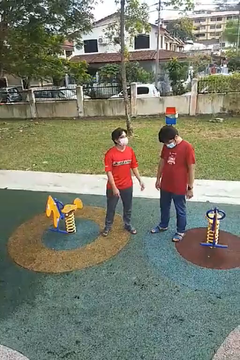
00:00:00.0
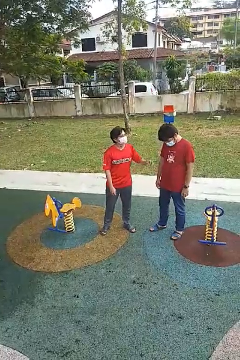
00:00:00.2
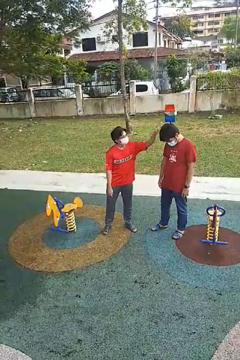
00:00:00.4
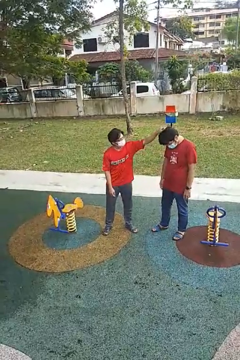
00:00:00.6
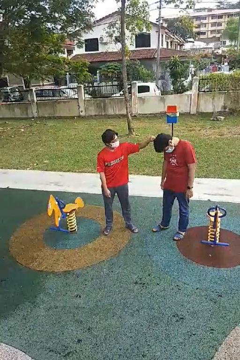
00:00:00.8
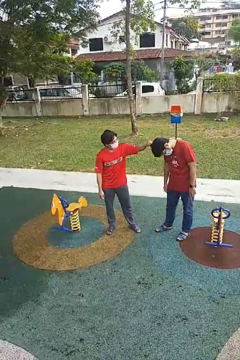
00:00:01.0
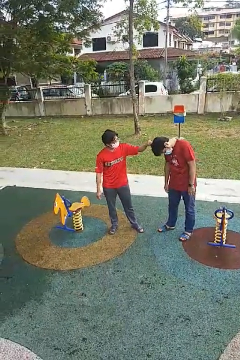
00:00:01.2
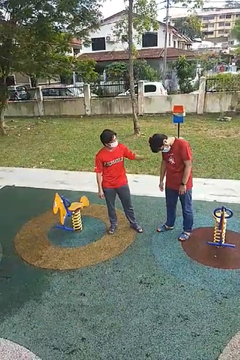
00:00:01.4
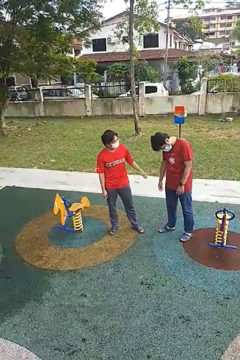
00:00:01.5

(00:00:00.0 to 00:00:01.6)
person grabs person by hair

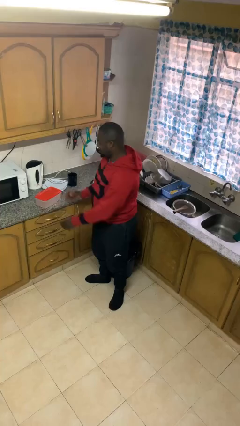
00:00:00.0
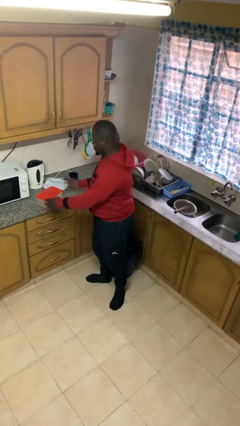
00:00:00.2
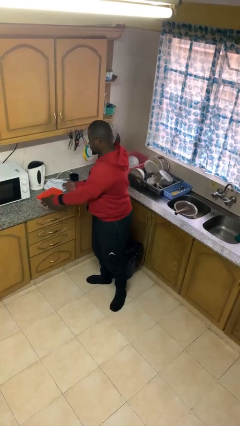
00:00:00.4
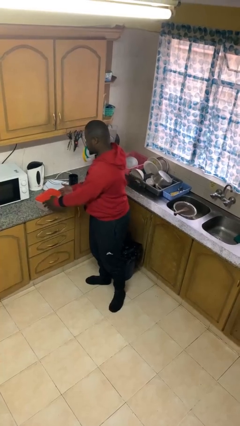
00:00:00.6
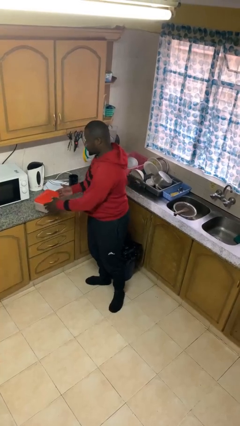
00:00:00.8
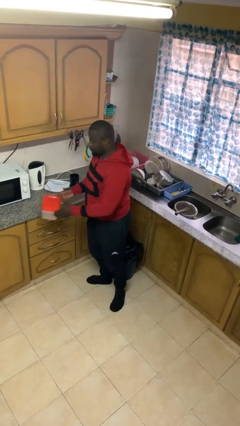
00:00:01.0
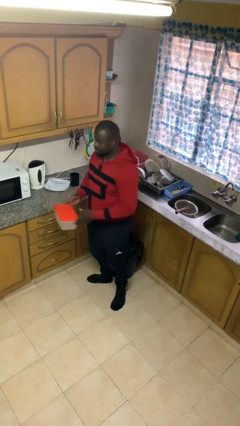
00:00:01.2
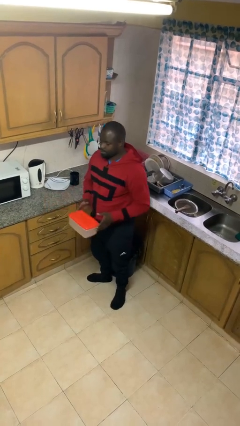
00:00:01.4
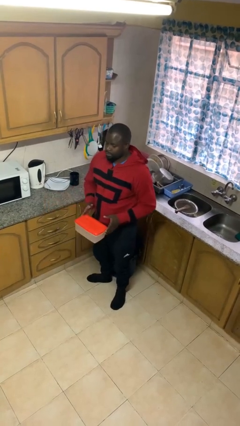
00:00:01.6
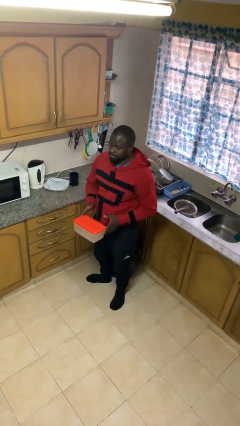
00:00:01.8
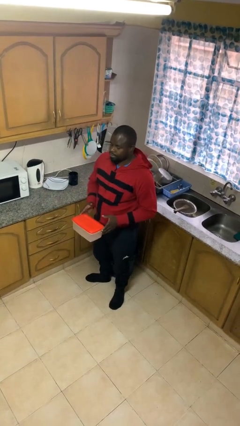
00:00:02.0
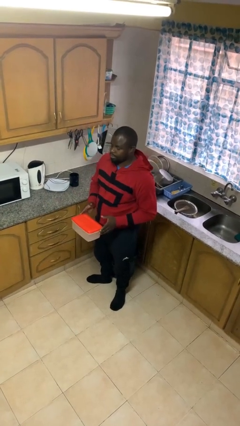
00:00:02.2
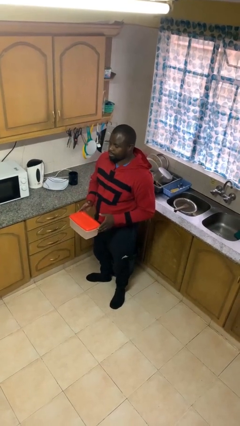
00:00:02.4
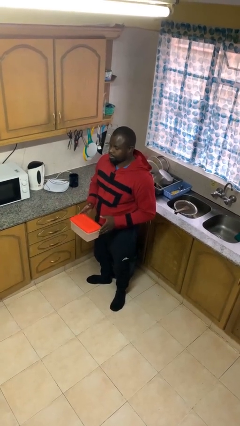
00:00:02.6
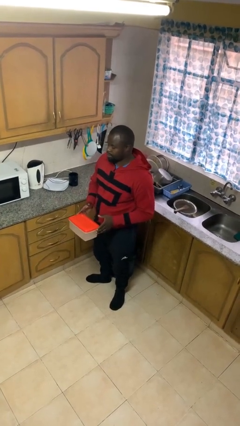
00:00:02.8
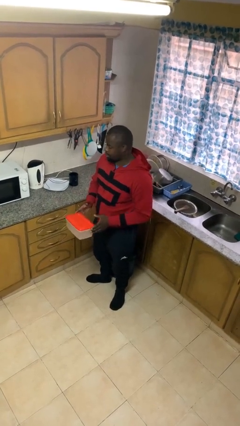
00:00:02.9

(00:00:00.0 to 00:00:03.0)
person picks up object from countertop

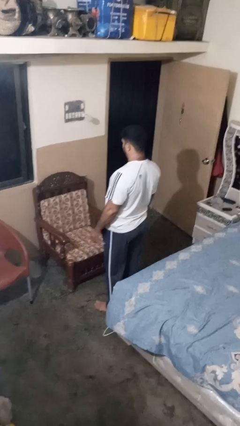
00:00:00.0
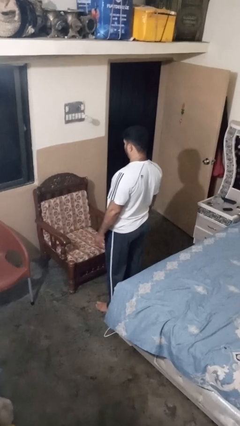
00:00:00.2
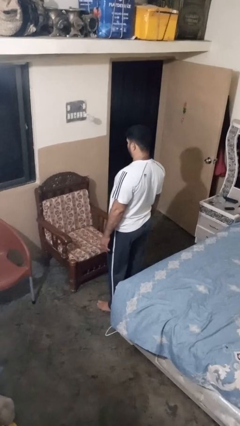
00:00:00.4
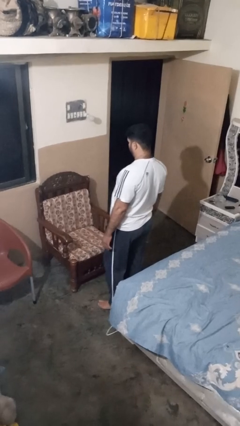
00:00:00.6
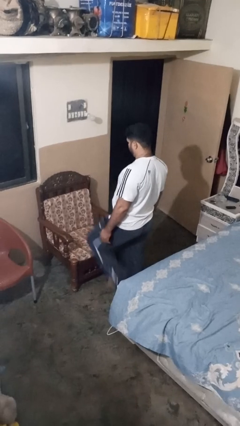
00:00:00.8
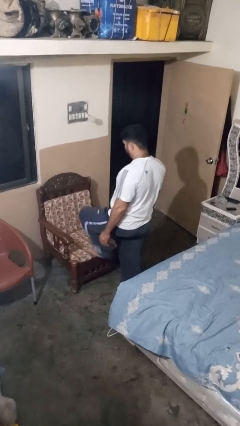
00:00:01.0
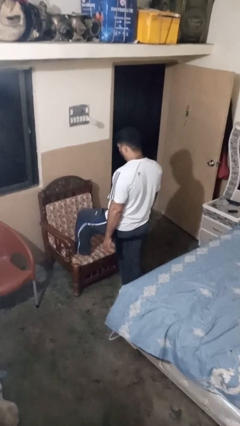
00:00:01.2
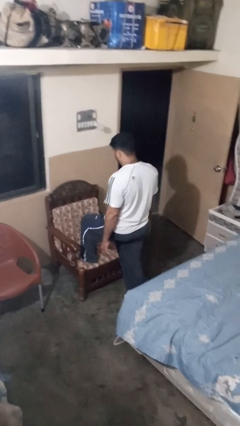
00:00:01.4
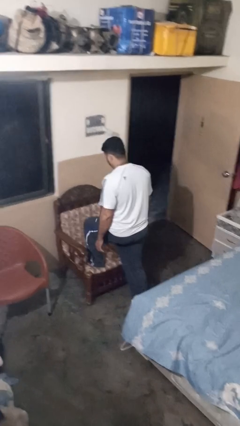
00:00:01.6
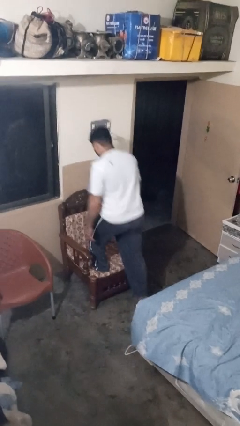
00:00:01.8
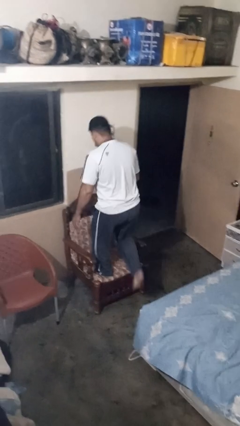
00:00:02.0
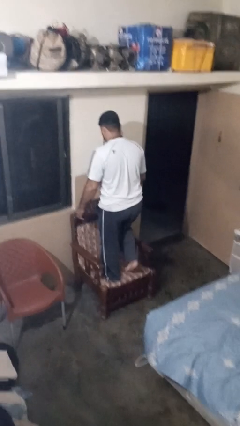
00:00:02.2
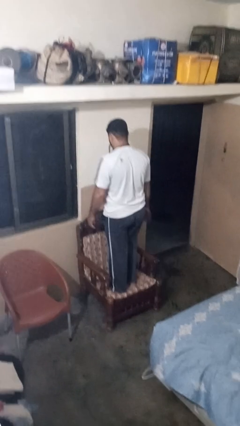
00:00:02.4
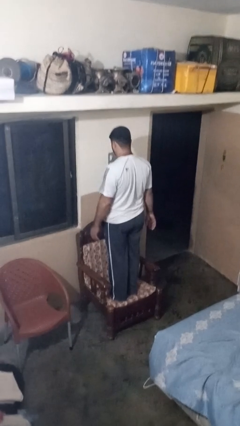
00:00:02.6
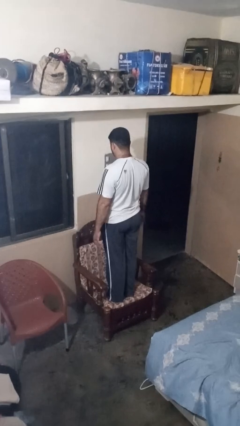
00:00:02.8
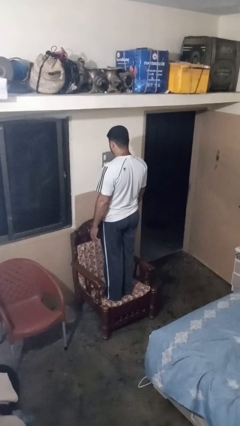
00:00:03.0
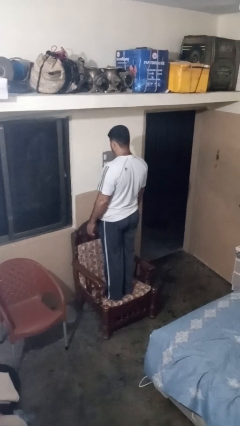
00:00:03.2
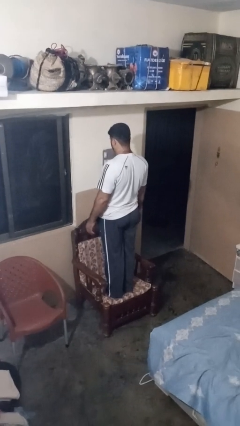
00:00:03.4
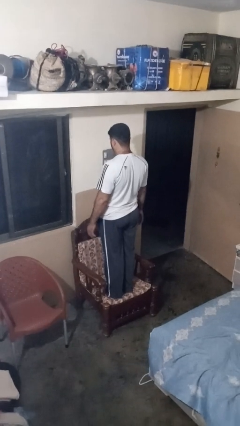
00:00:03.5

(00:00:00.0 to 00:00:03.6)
person climbs on couch

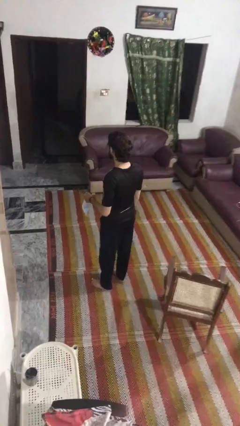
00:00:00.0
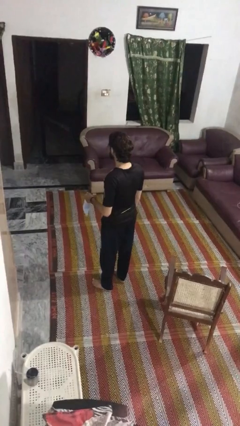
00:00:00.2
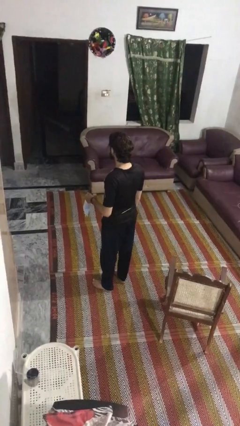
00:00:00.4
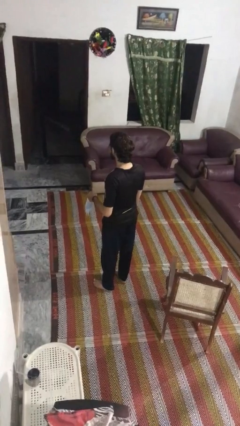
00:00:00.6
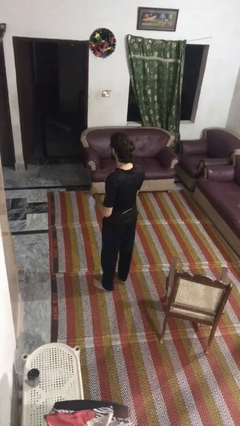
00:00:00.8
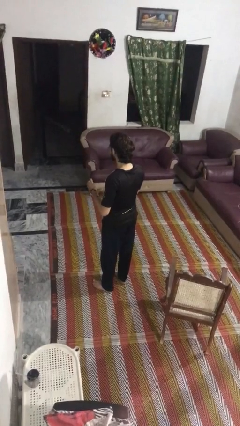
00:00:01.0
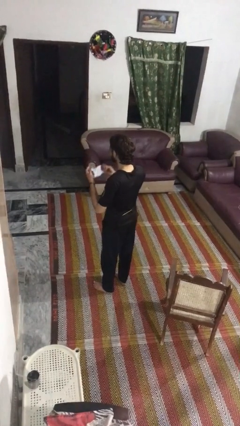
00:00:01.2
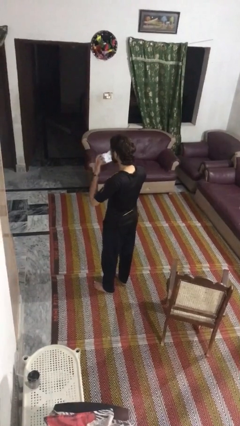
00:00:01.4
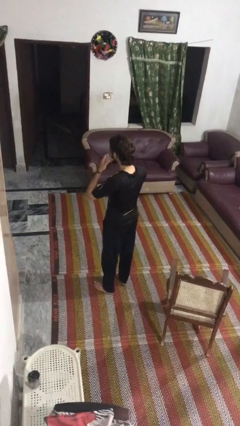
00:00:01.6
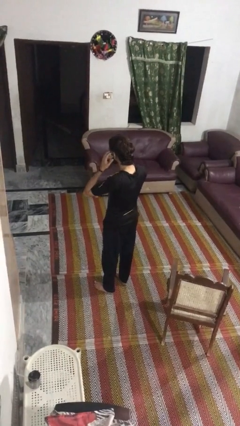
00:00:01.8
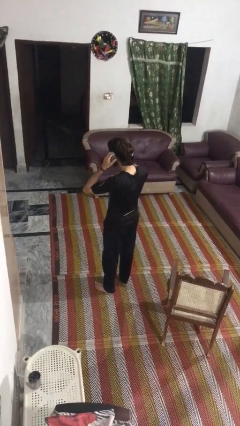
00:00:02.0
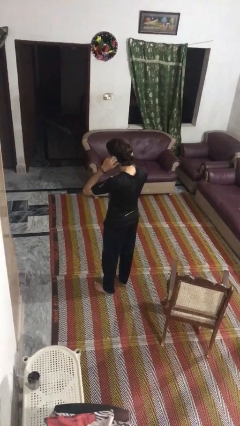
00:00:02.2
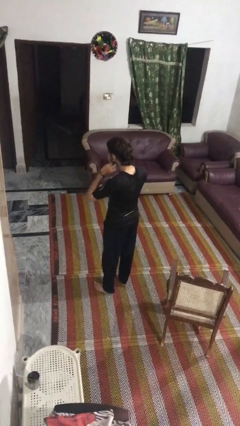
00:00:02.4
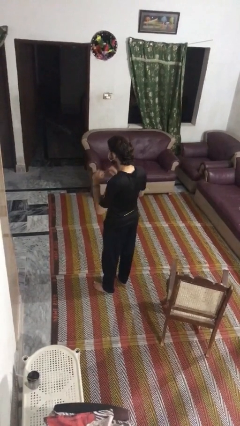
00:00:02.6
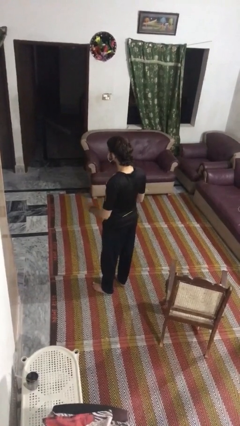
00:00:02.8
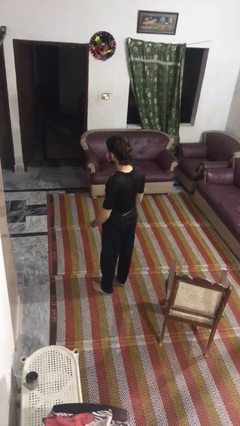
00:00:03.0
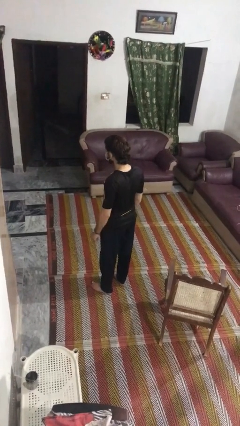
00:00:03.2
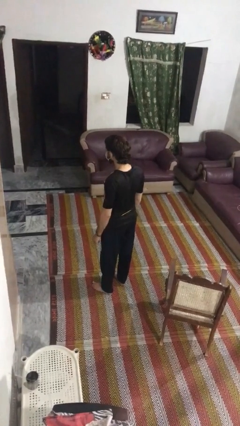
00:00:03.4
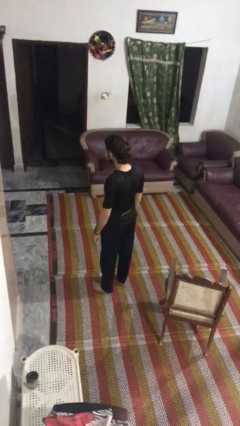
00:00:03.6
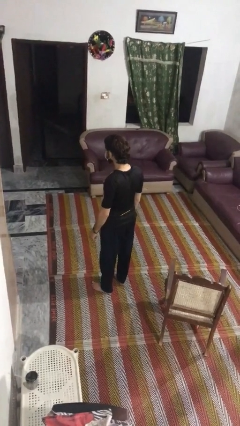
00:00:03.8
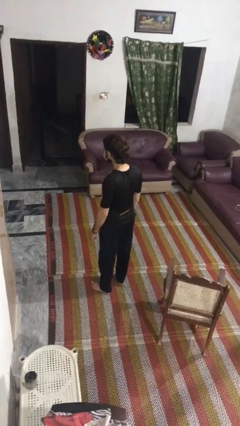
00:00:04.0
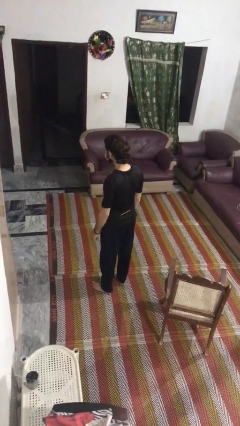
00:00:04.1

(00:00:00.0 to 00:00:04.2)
person puts on facemask

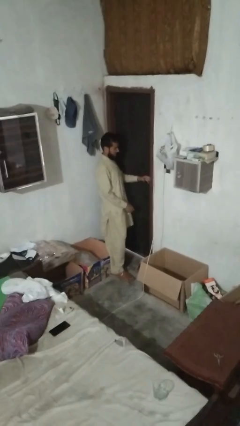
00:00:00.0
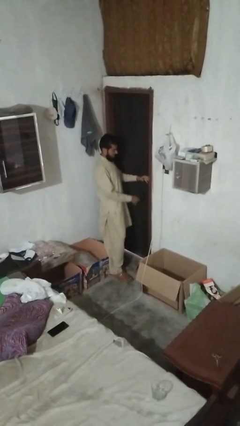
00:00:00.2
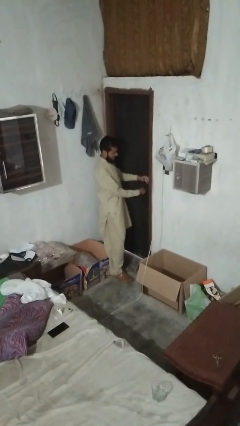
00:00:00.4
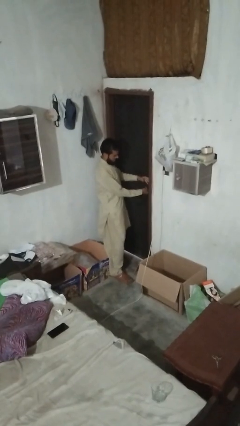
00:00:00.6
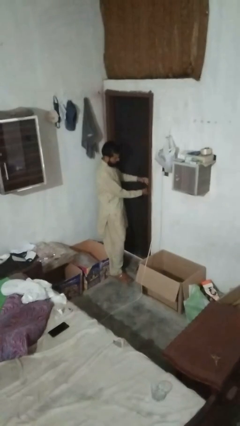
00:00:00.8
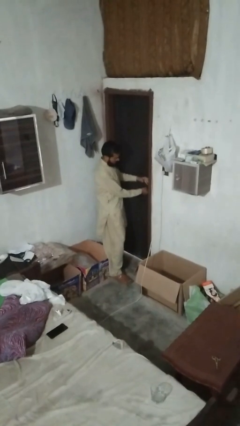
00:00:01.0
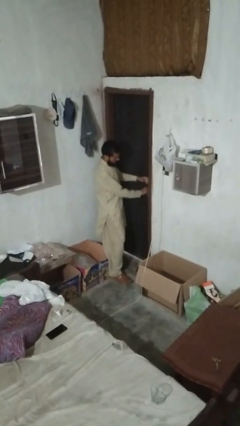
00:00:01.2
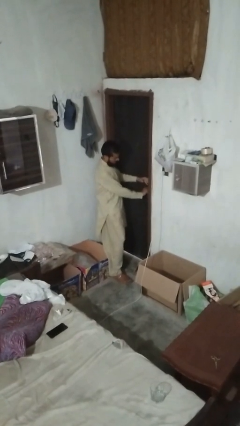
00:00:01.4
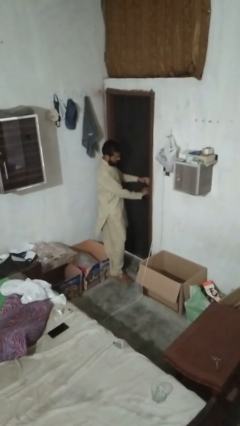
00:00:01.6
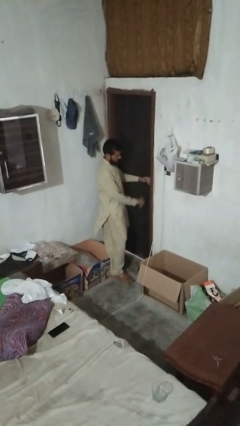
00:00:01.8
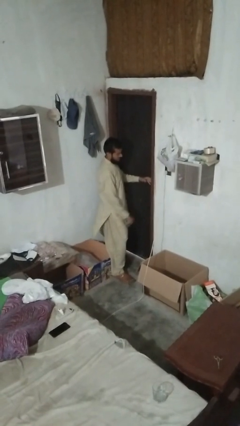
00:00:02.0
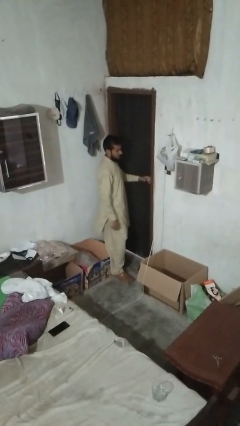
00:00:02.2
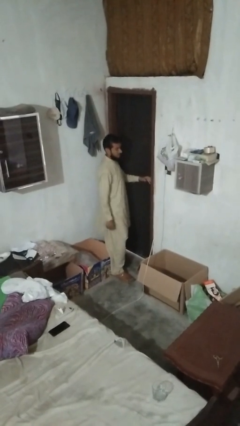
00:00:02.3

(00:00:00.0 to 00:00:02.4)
person locks door with keys

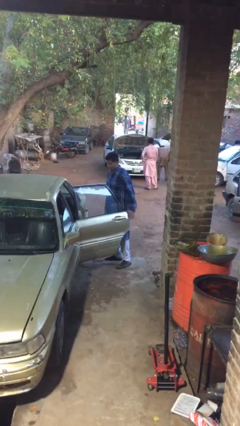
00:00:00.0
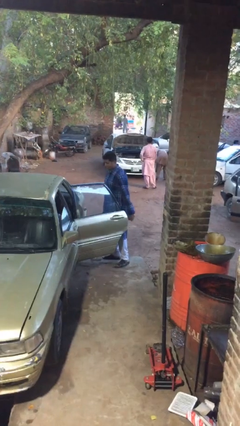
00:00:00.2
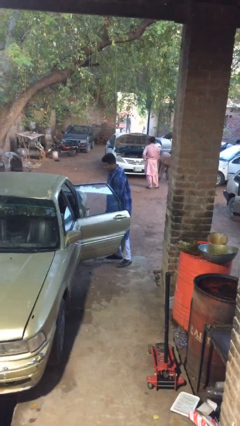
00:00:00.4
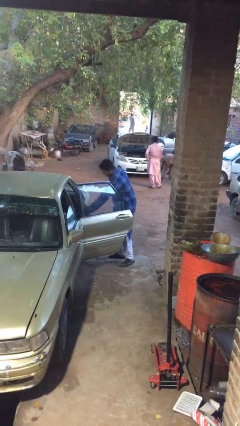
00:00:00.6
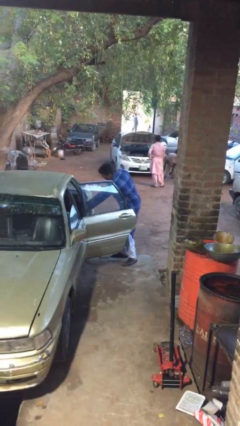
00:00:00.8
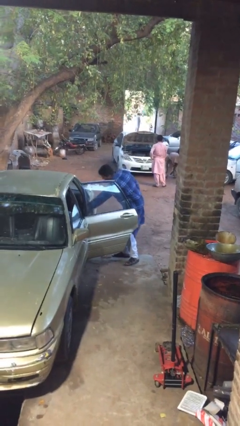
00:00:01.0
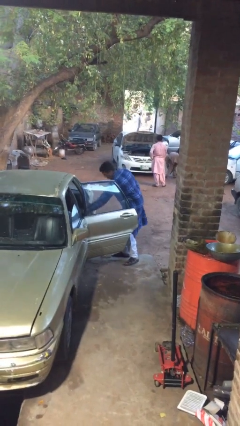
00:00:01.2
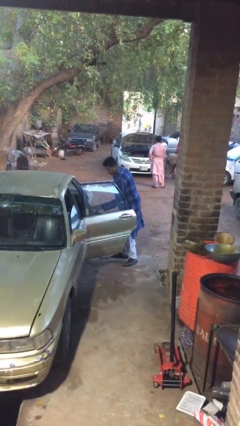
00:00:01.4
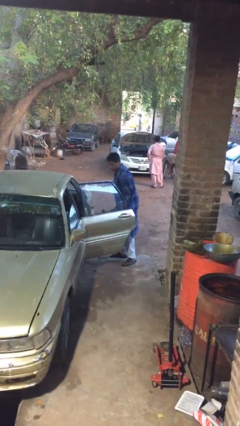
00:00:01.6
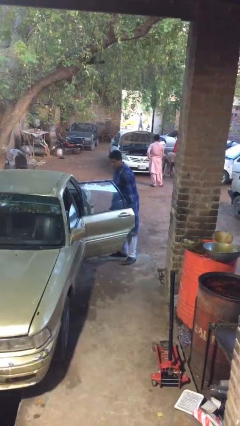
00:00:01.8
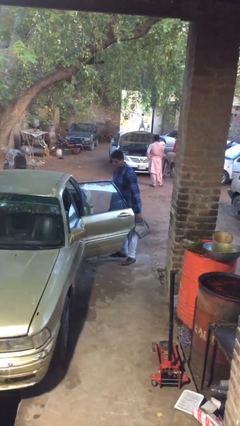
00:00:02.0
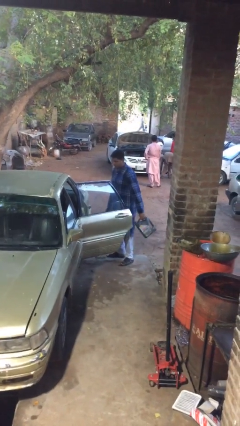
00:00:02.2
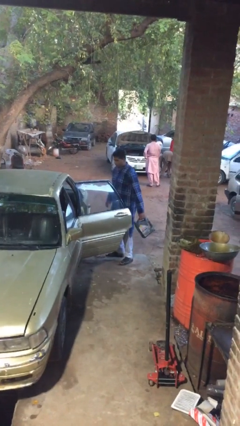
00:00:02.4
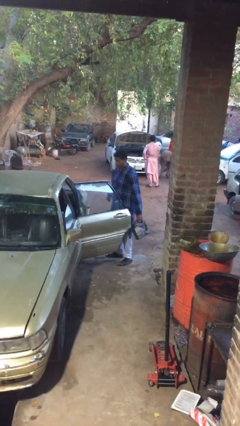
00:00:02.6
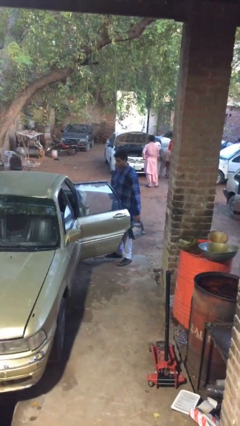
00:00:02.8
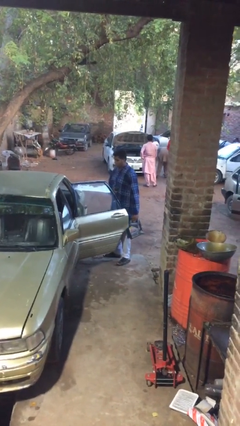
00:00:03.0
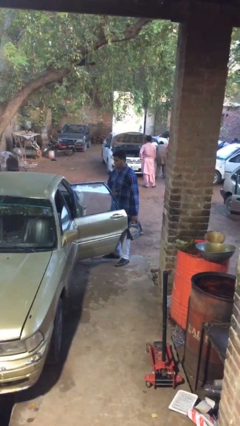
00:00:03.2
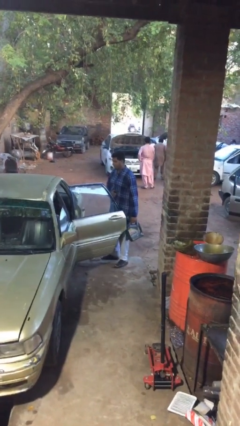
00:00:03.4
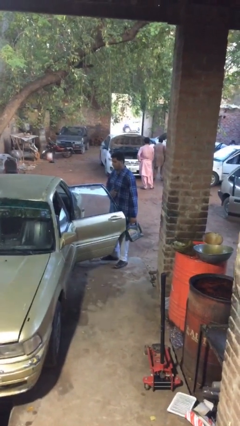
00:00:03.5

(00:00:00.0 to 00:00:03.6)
person unloads car
